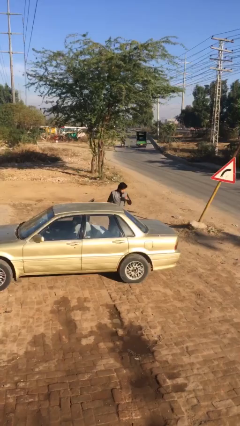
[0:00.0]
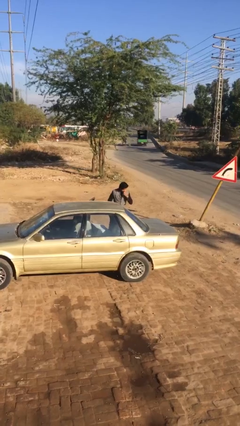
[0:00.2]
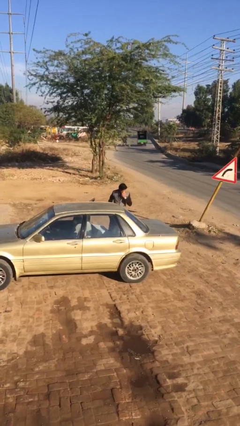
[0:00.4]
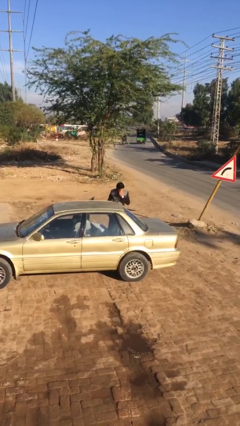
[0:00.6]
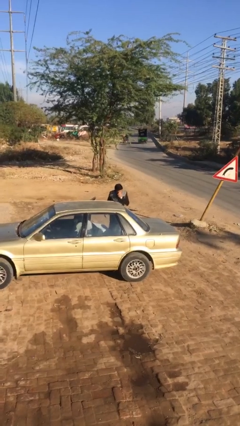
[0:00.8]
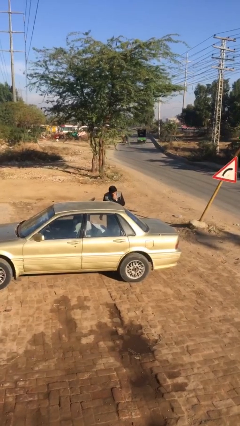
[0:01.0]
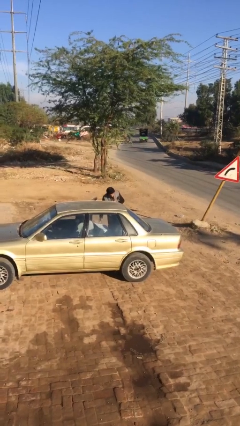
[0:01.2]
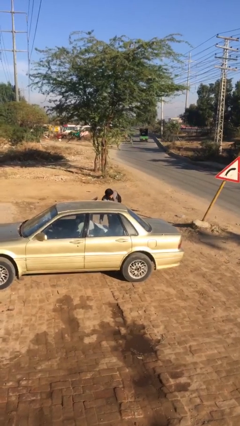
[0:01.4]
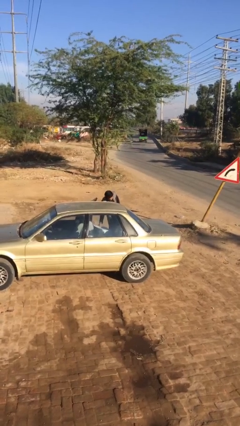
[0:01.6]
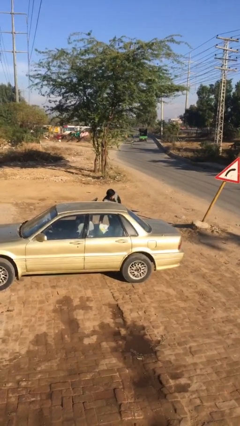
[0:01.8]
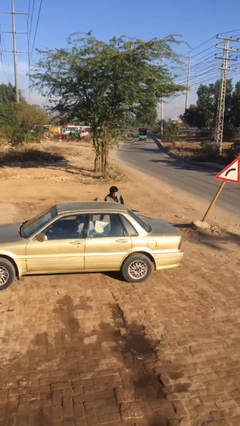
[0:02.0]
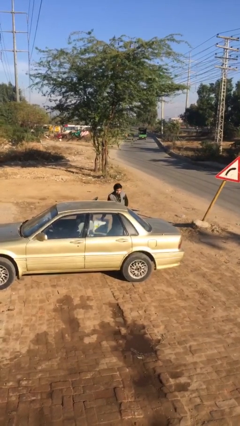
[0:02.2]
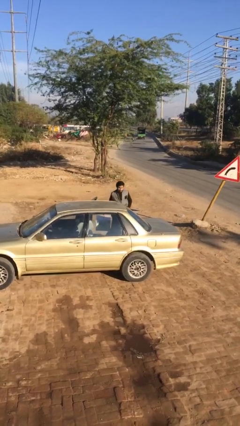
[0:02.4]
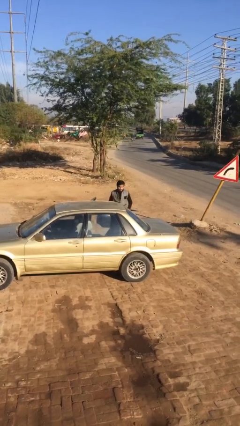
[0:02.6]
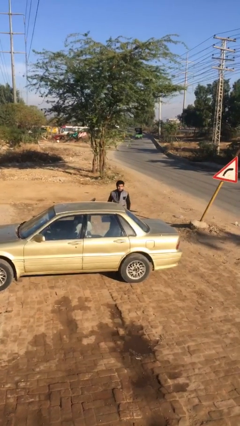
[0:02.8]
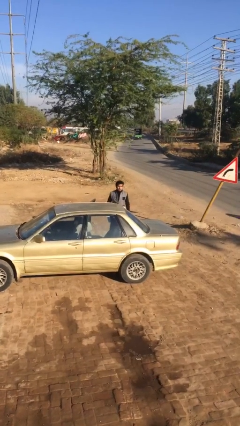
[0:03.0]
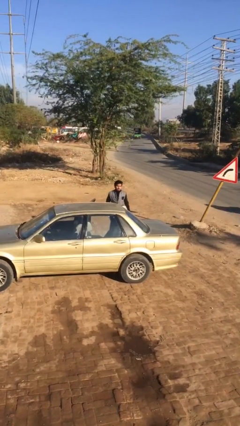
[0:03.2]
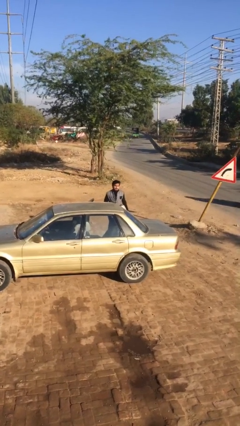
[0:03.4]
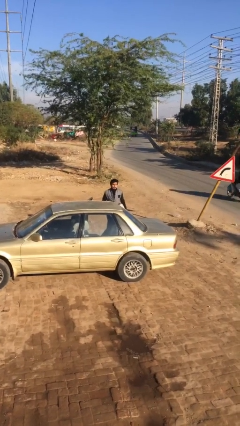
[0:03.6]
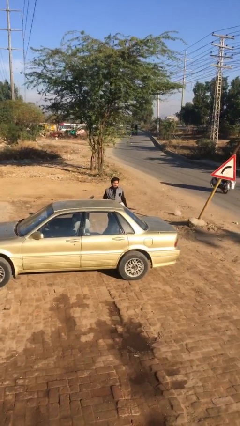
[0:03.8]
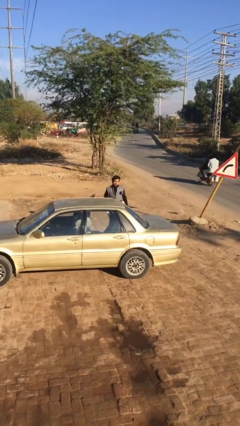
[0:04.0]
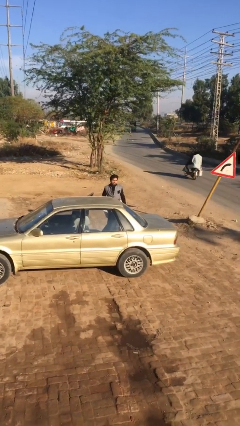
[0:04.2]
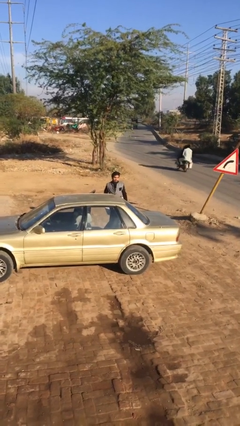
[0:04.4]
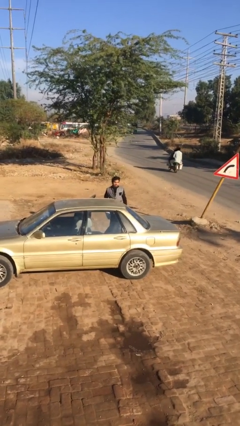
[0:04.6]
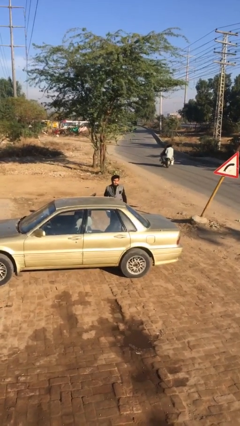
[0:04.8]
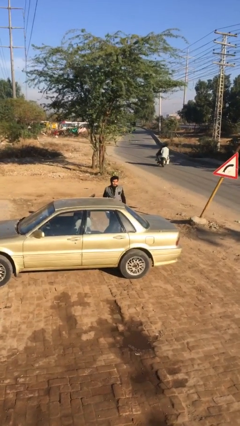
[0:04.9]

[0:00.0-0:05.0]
person unloads car

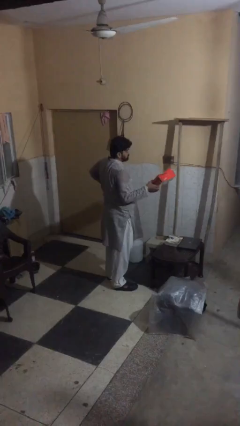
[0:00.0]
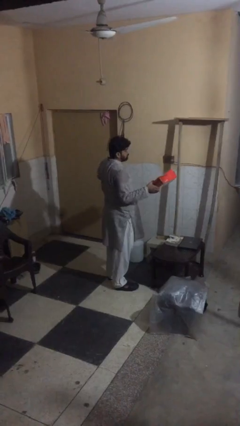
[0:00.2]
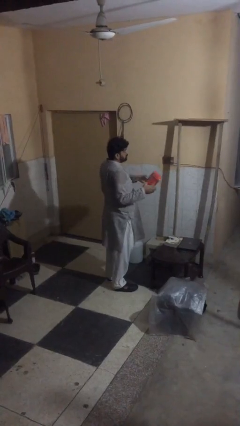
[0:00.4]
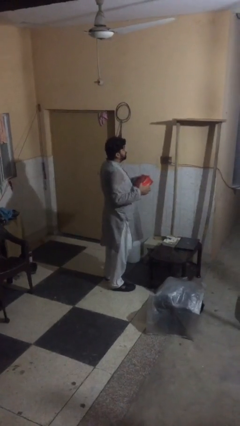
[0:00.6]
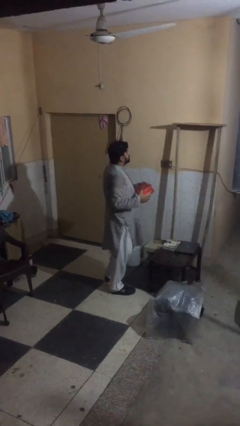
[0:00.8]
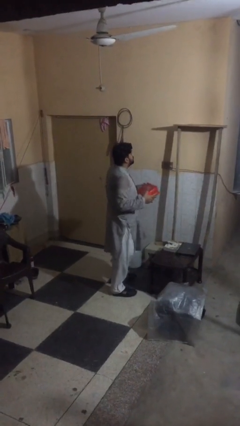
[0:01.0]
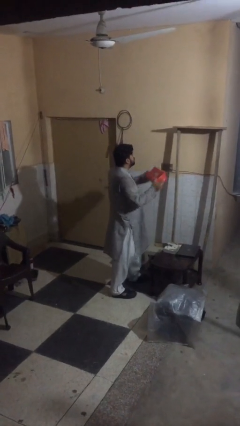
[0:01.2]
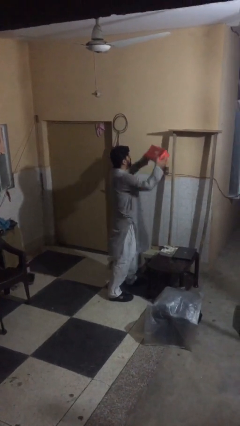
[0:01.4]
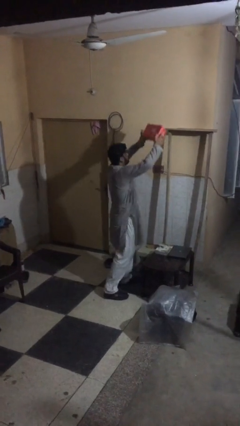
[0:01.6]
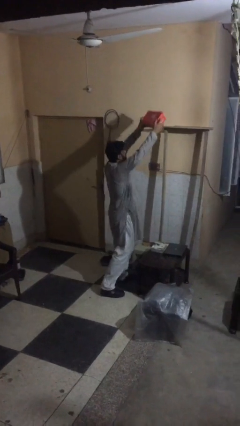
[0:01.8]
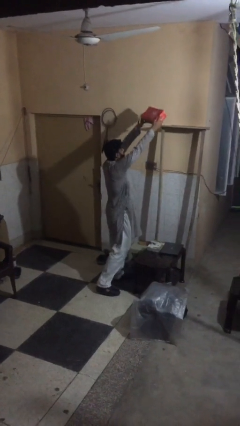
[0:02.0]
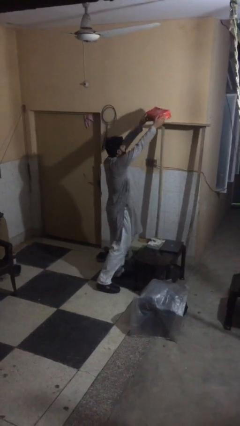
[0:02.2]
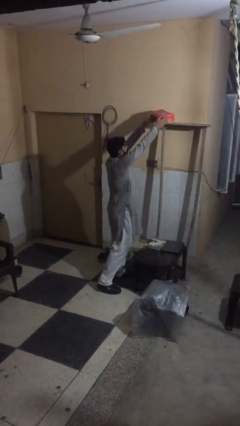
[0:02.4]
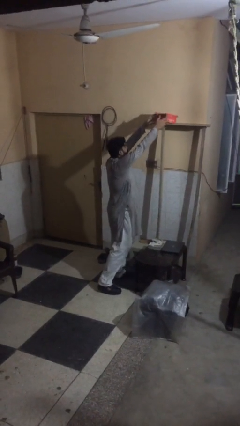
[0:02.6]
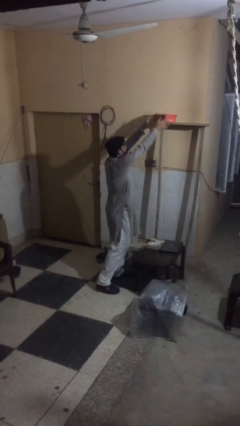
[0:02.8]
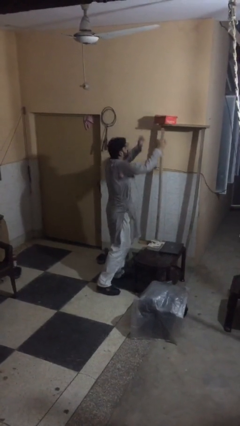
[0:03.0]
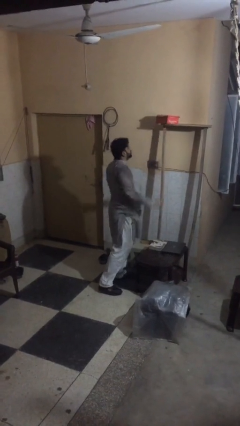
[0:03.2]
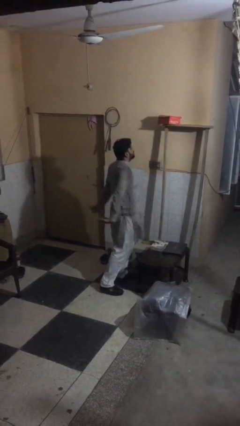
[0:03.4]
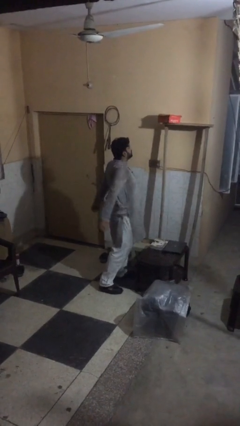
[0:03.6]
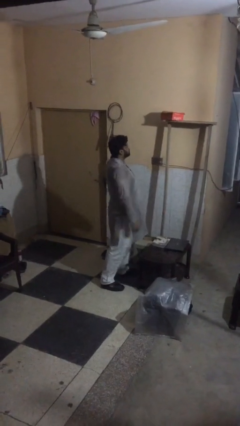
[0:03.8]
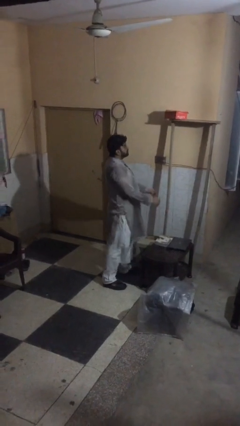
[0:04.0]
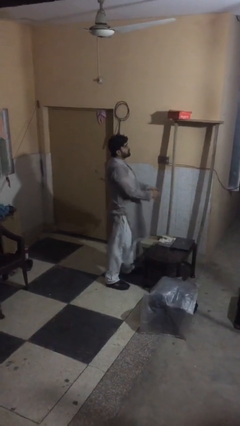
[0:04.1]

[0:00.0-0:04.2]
person puts down object on shelf

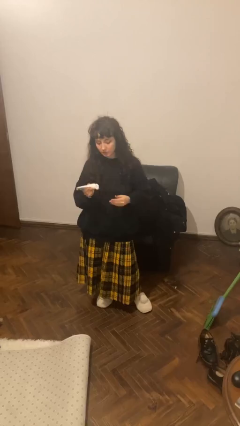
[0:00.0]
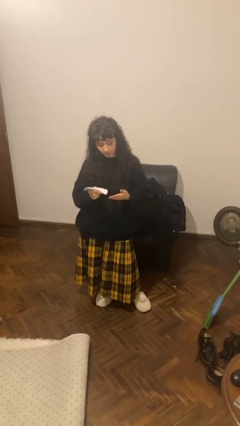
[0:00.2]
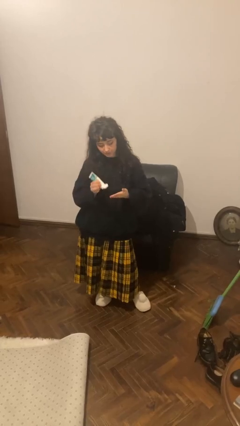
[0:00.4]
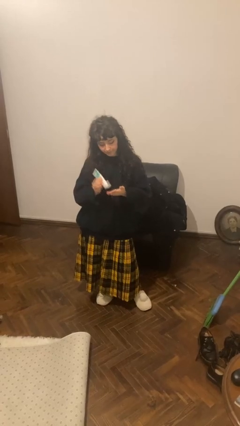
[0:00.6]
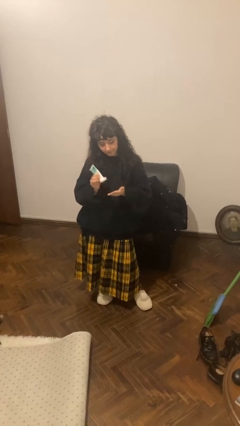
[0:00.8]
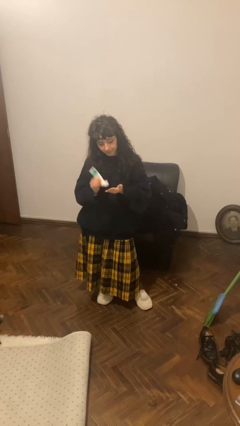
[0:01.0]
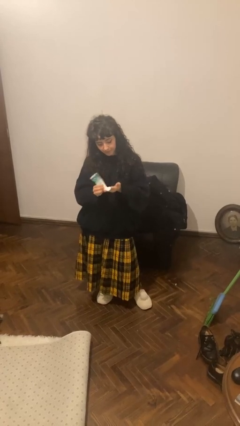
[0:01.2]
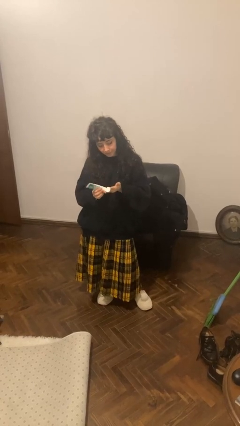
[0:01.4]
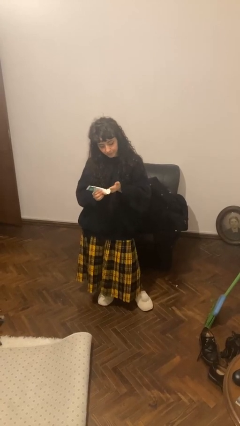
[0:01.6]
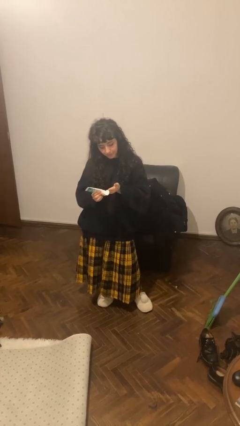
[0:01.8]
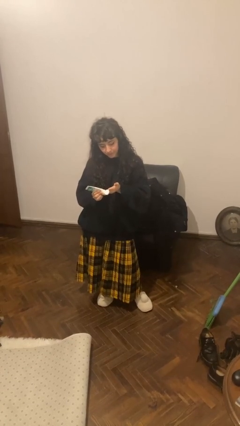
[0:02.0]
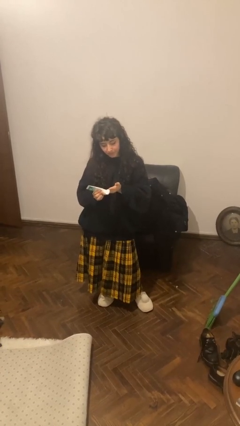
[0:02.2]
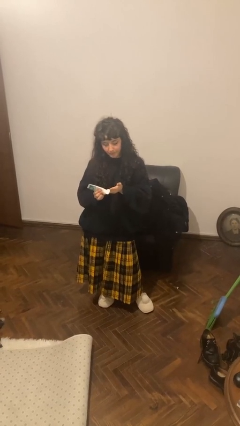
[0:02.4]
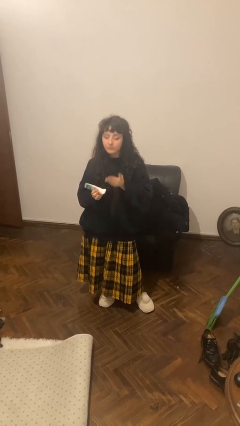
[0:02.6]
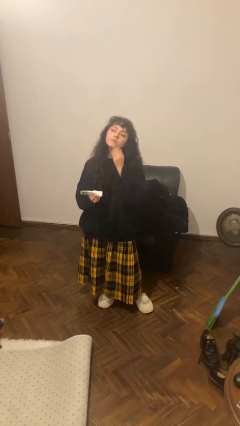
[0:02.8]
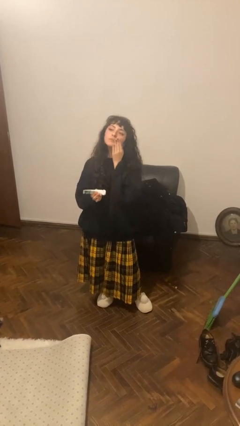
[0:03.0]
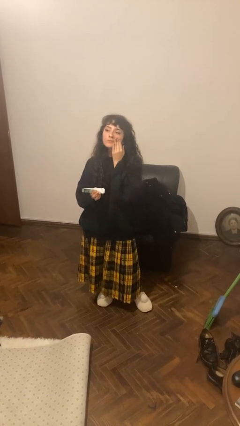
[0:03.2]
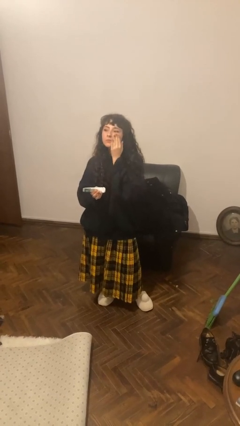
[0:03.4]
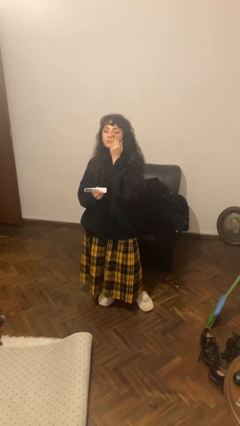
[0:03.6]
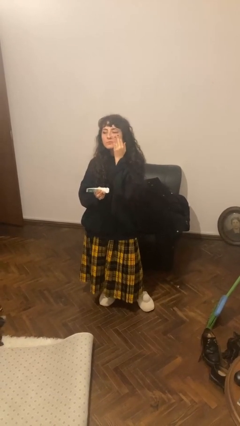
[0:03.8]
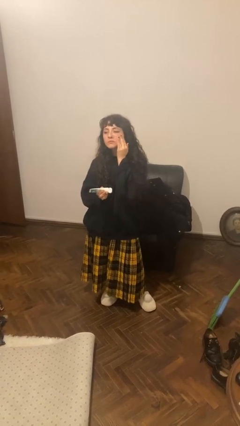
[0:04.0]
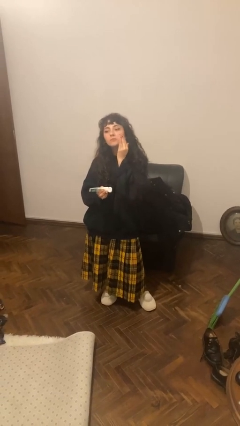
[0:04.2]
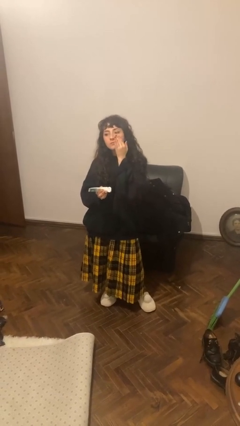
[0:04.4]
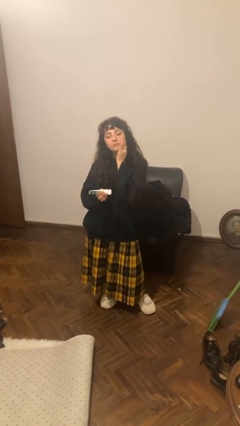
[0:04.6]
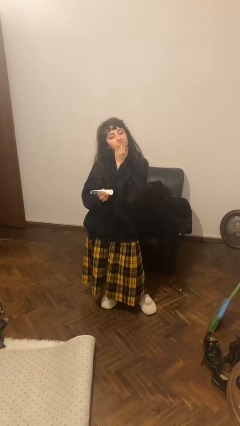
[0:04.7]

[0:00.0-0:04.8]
person applies facial moisturizer

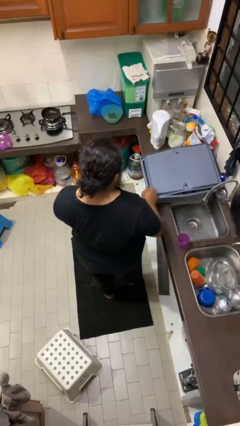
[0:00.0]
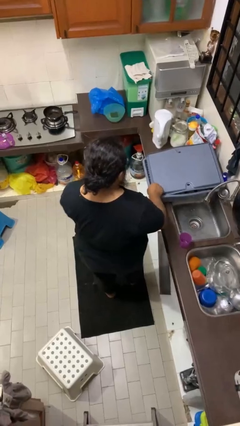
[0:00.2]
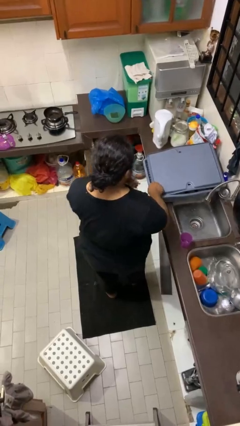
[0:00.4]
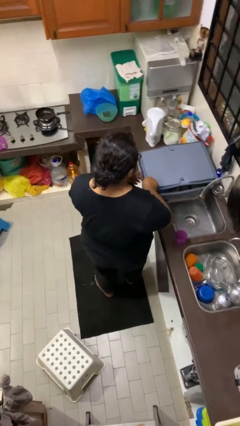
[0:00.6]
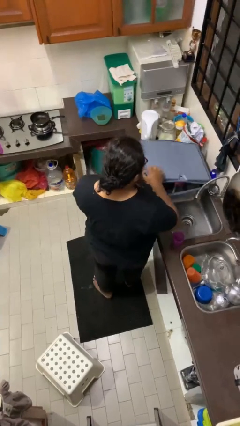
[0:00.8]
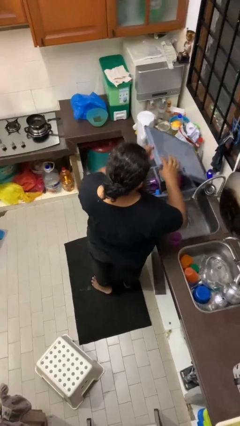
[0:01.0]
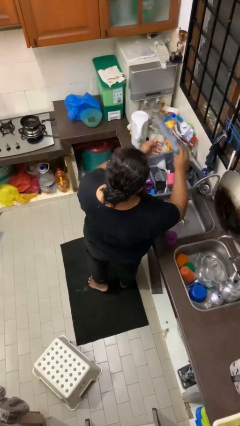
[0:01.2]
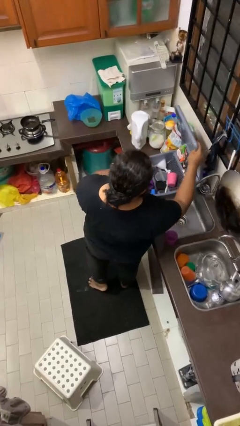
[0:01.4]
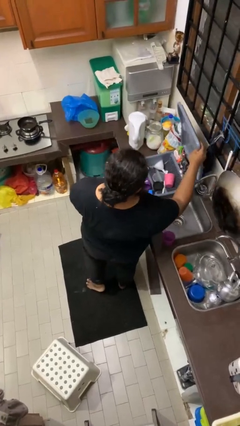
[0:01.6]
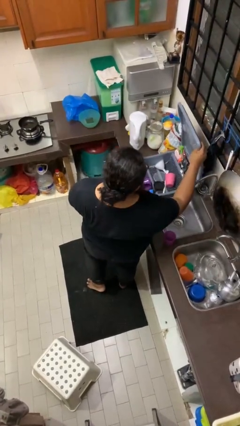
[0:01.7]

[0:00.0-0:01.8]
person opens dishwasher

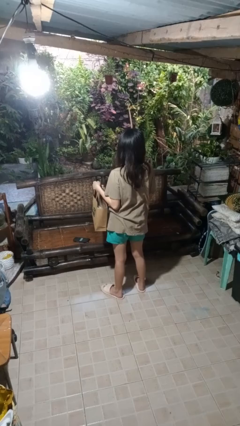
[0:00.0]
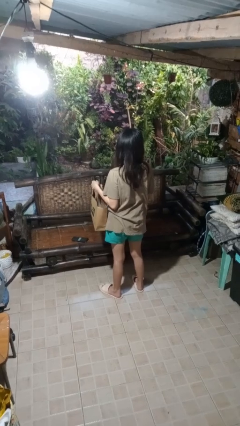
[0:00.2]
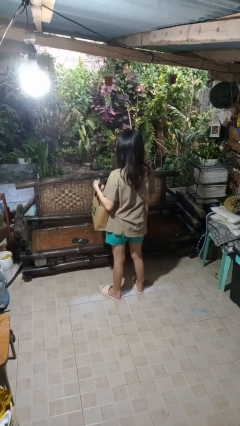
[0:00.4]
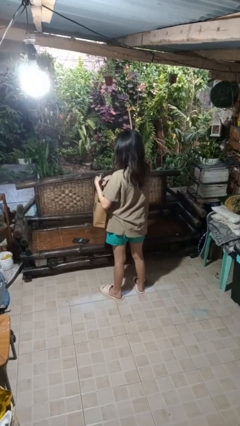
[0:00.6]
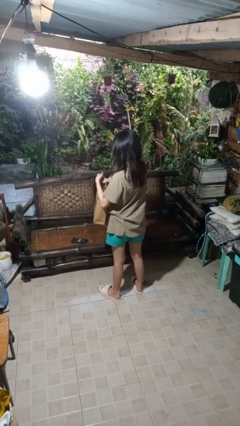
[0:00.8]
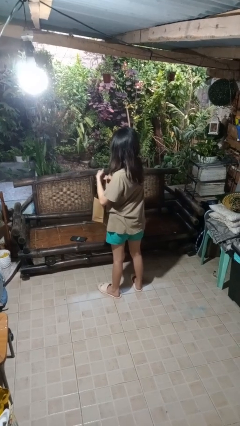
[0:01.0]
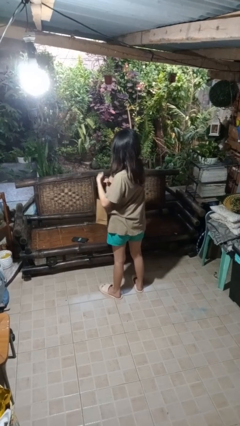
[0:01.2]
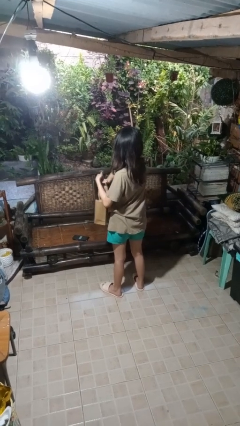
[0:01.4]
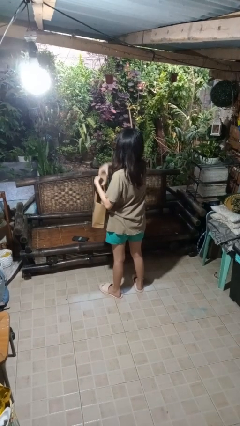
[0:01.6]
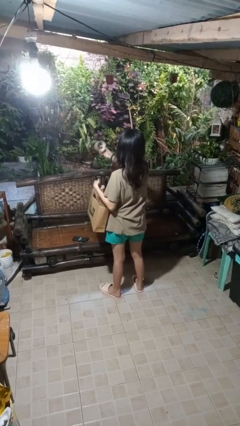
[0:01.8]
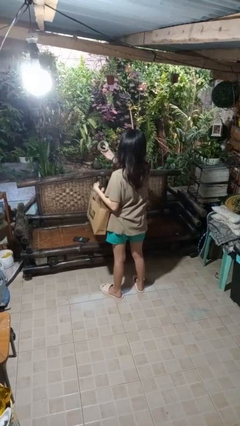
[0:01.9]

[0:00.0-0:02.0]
person takes object from bag
